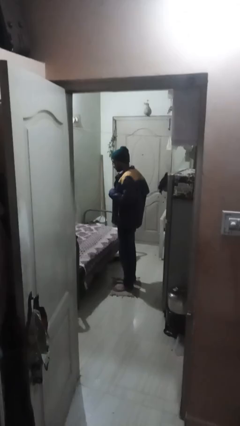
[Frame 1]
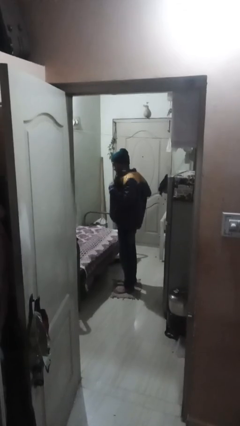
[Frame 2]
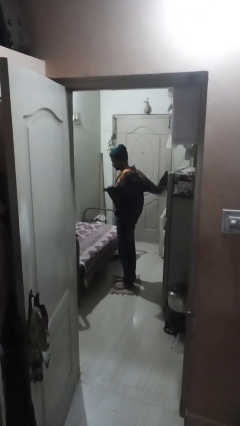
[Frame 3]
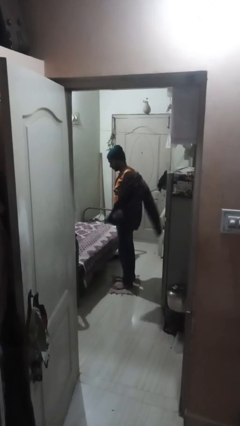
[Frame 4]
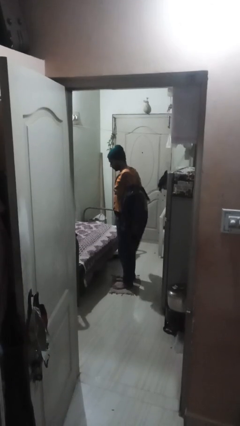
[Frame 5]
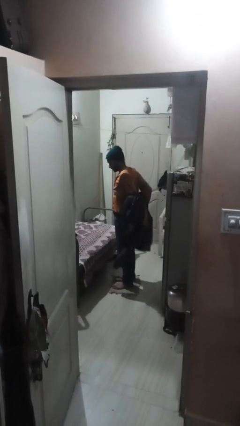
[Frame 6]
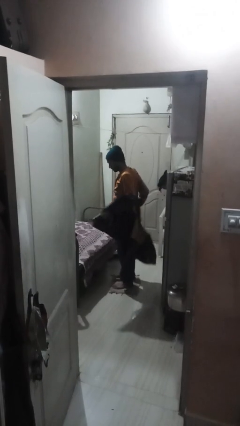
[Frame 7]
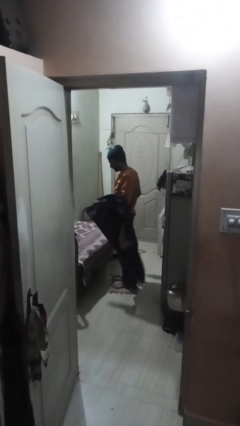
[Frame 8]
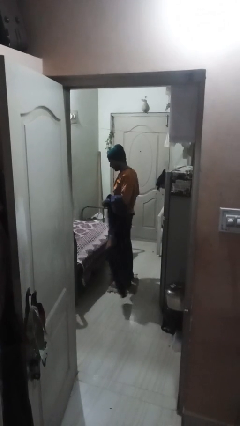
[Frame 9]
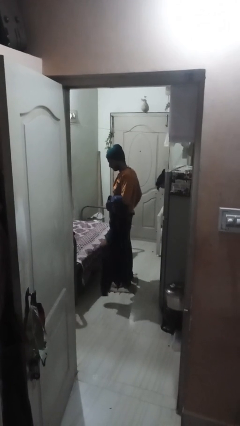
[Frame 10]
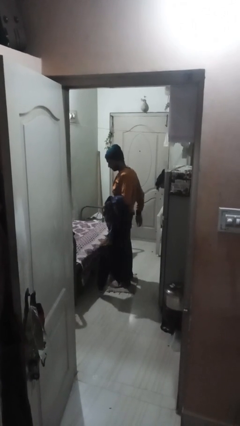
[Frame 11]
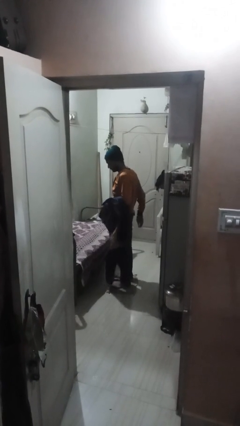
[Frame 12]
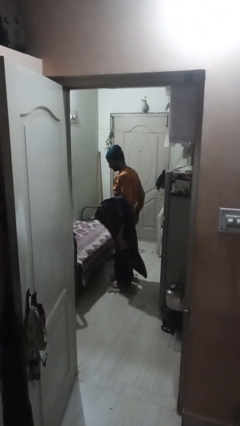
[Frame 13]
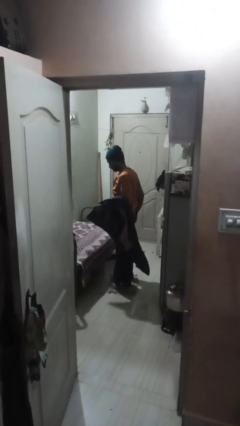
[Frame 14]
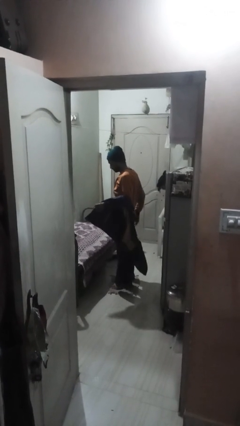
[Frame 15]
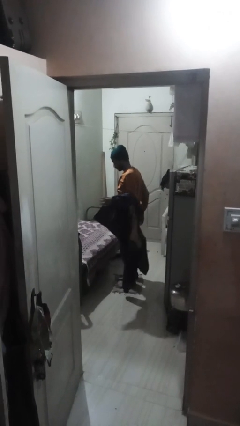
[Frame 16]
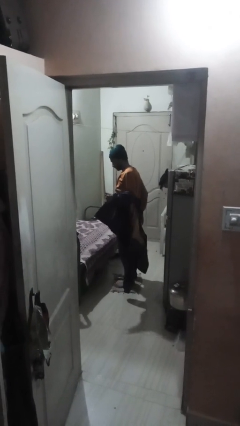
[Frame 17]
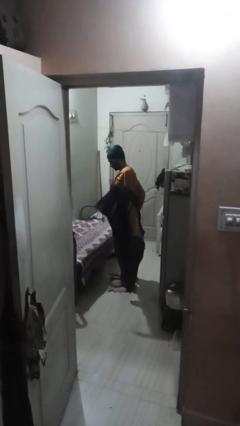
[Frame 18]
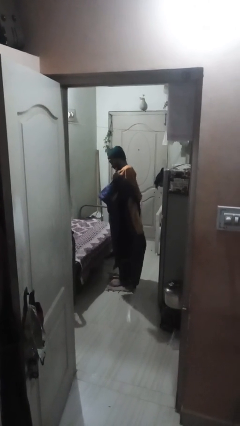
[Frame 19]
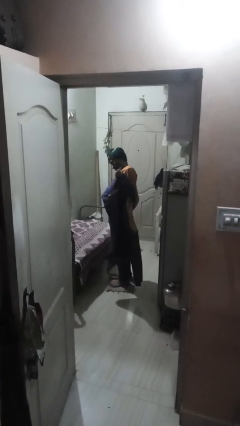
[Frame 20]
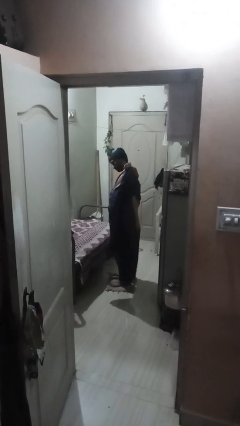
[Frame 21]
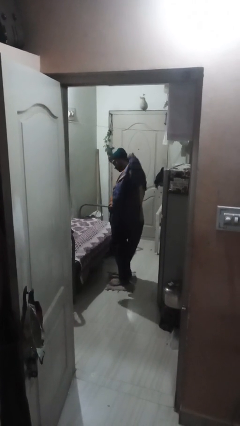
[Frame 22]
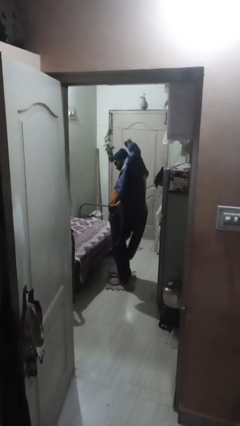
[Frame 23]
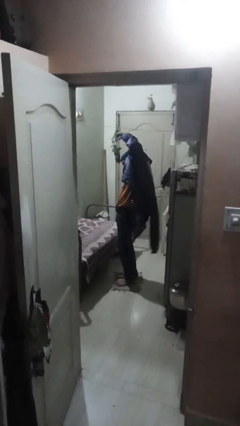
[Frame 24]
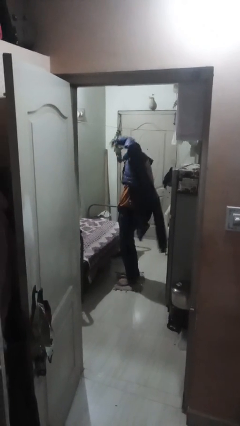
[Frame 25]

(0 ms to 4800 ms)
person takes off jacket

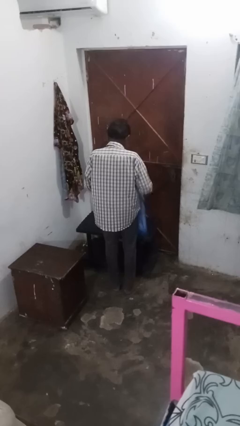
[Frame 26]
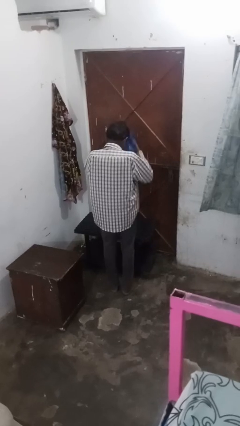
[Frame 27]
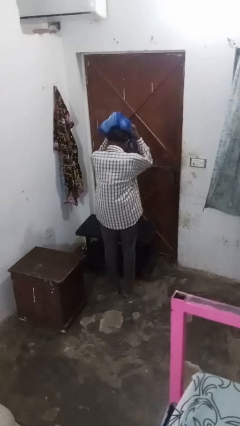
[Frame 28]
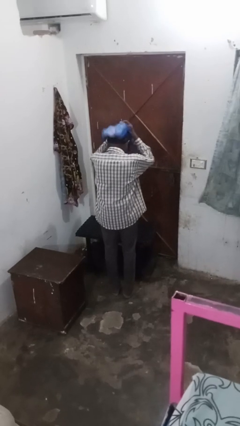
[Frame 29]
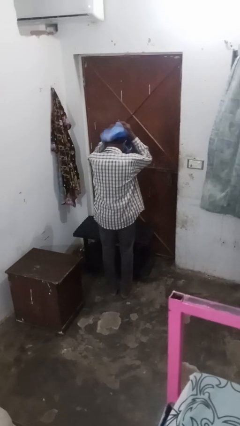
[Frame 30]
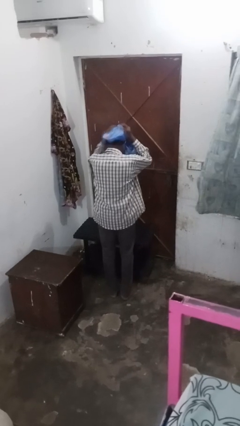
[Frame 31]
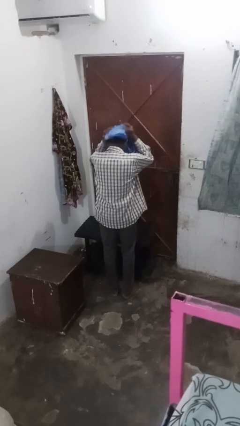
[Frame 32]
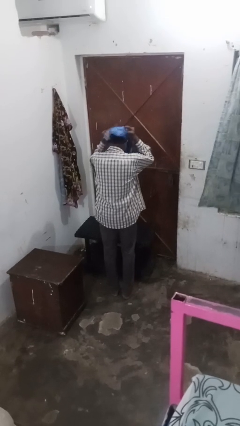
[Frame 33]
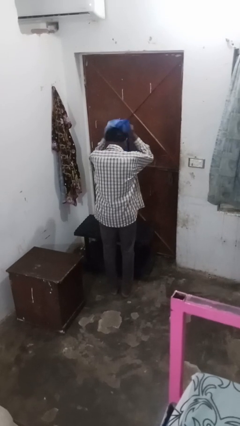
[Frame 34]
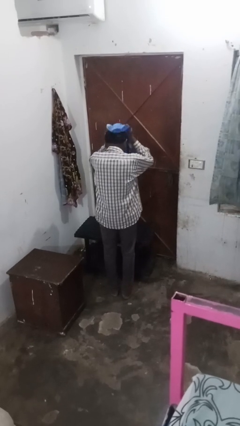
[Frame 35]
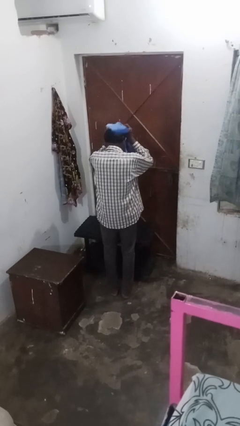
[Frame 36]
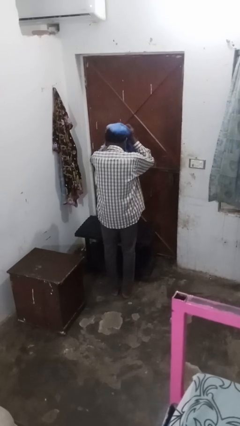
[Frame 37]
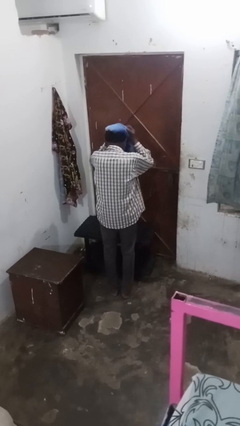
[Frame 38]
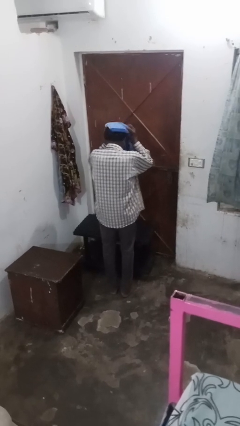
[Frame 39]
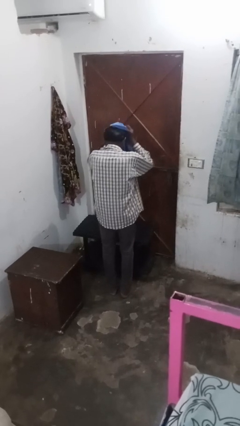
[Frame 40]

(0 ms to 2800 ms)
person dries hair with towel

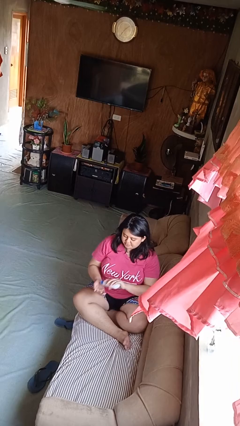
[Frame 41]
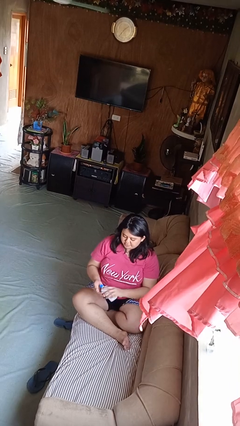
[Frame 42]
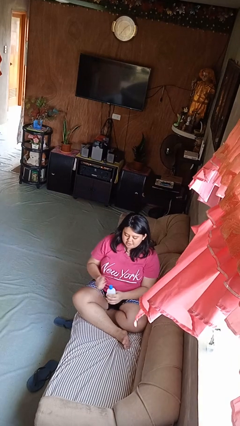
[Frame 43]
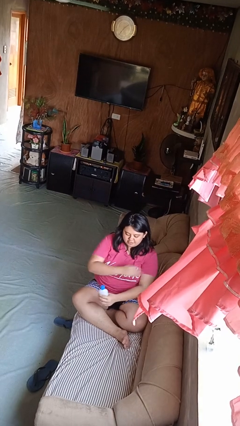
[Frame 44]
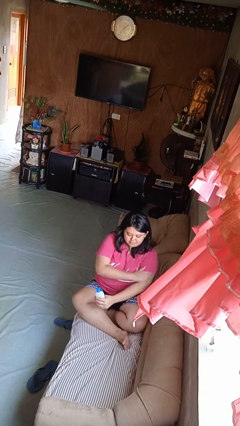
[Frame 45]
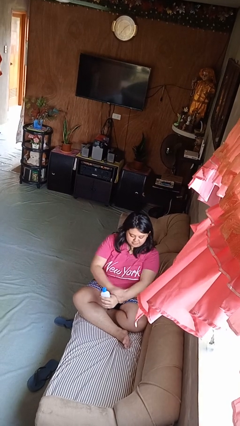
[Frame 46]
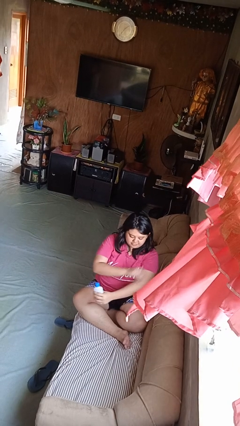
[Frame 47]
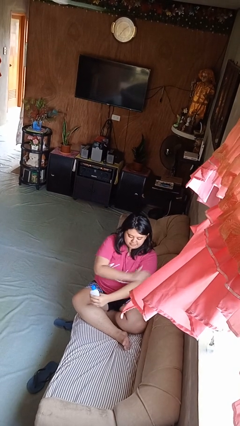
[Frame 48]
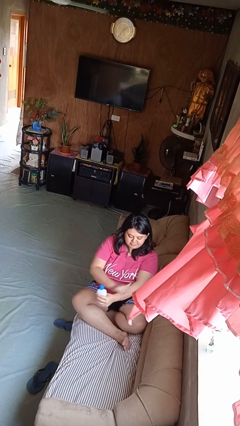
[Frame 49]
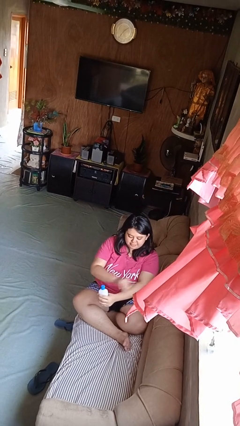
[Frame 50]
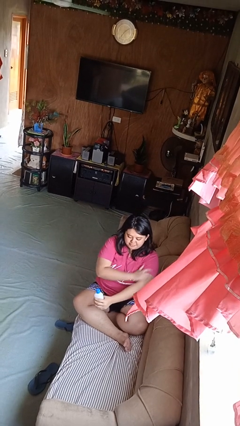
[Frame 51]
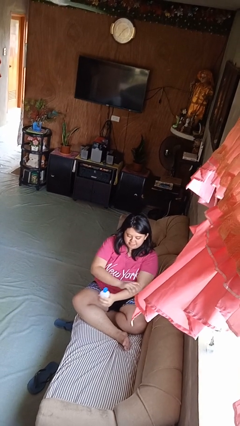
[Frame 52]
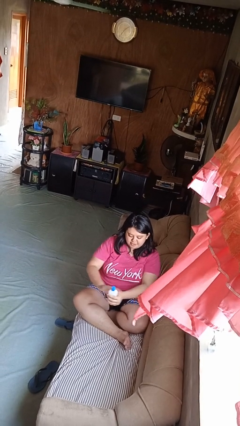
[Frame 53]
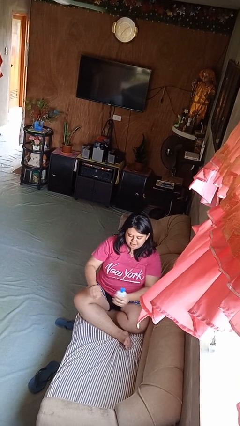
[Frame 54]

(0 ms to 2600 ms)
person applies sunscreen

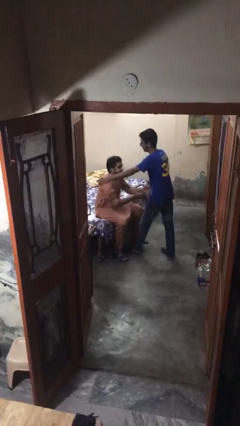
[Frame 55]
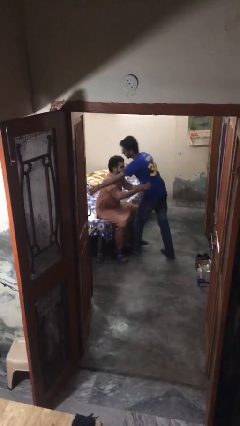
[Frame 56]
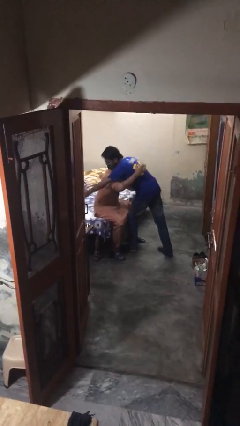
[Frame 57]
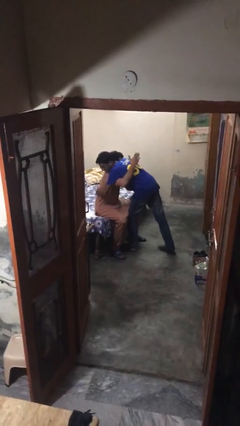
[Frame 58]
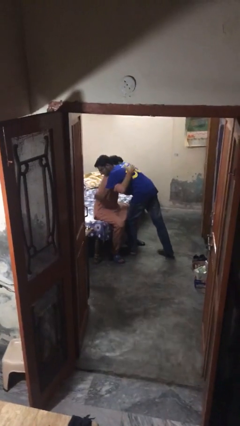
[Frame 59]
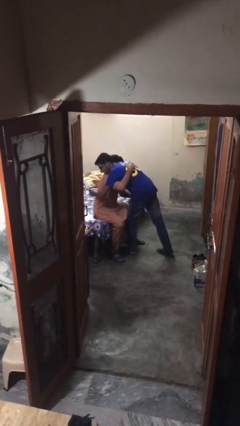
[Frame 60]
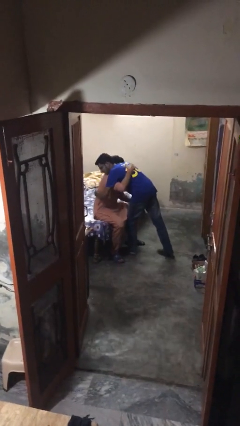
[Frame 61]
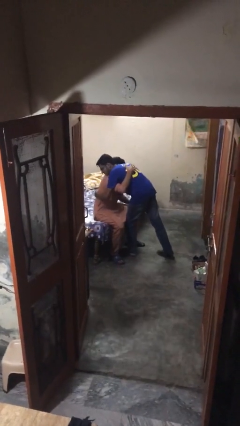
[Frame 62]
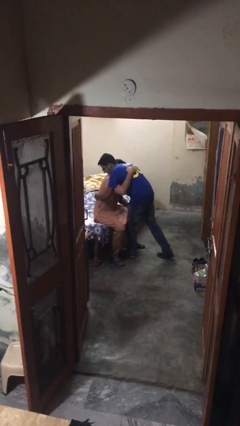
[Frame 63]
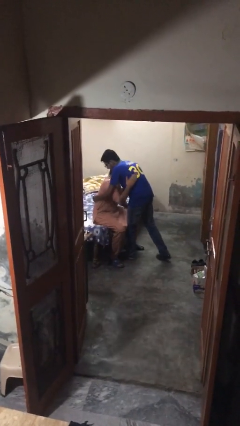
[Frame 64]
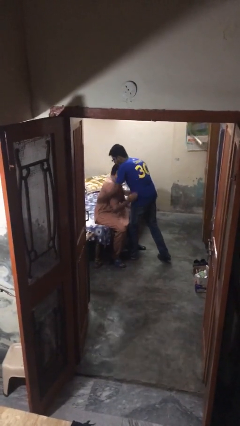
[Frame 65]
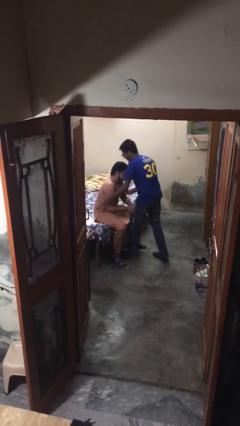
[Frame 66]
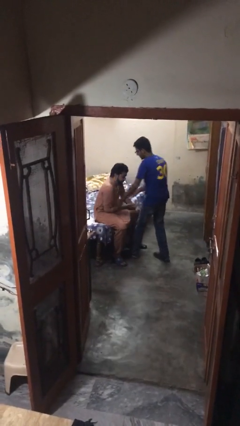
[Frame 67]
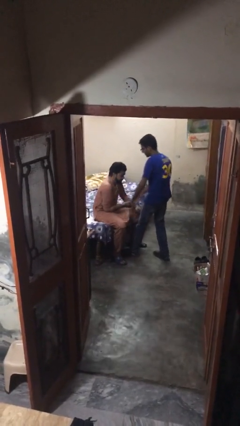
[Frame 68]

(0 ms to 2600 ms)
person embraces person

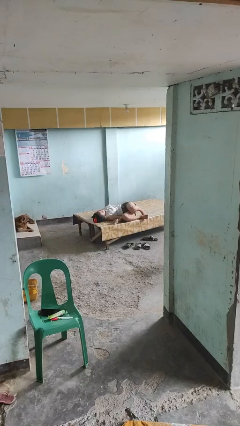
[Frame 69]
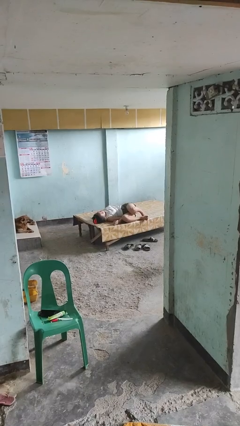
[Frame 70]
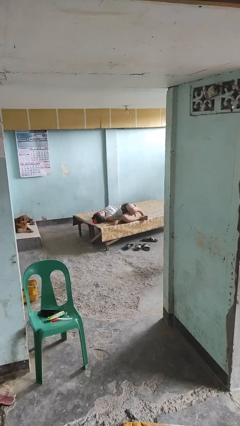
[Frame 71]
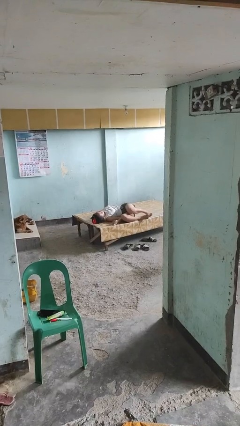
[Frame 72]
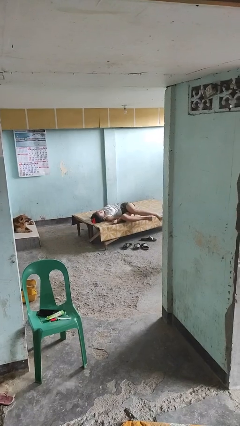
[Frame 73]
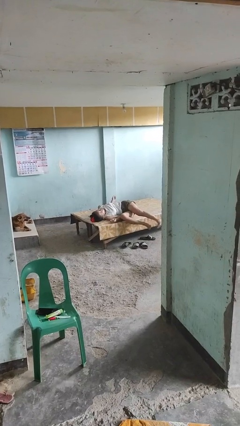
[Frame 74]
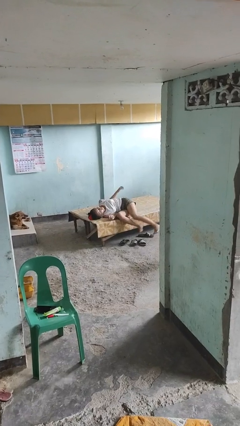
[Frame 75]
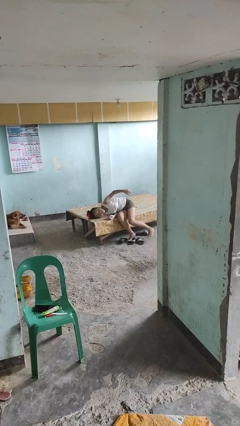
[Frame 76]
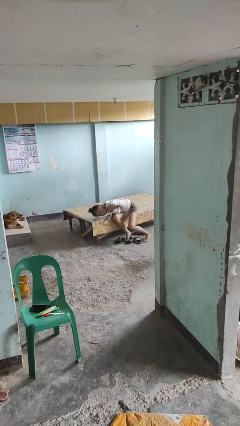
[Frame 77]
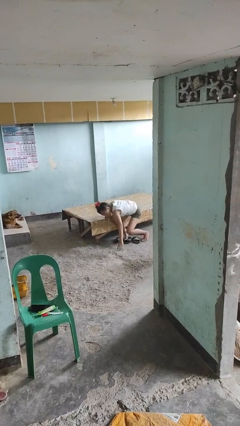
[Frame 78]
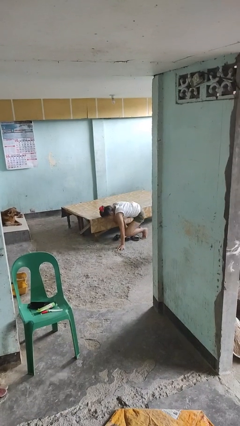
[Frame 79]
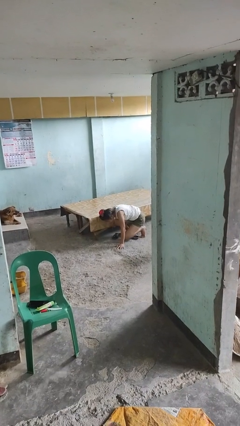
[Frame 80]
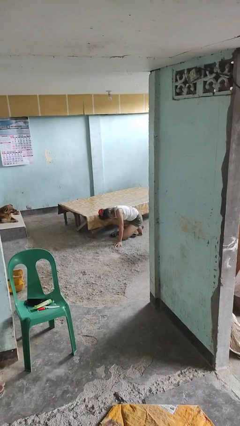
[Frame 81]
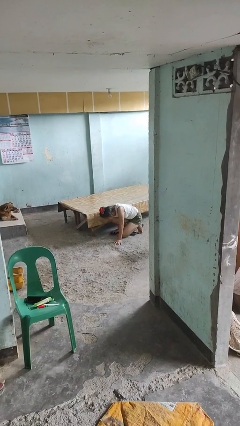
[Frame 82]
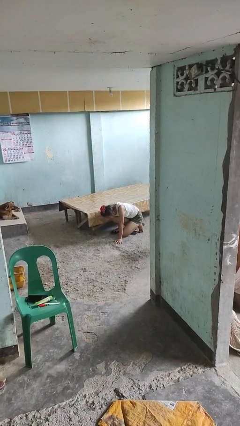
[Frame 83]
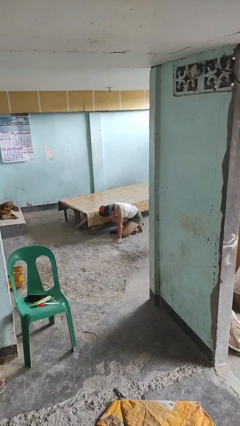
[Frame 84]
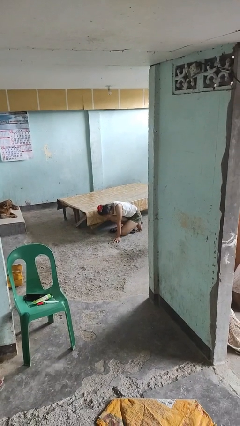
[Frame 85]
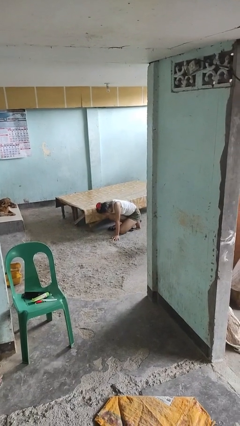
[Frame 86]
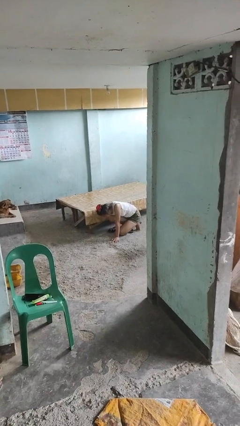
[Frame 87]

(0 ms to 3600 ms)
person falls from bed

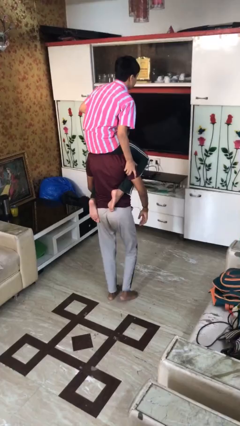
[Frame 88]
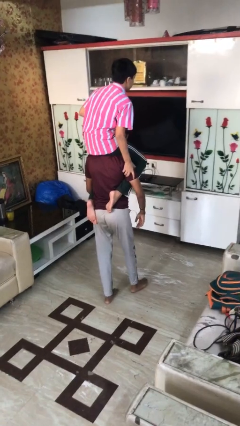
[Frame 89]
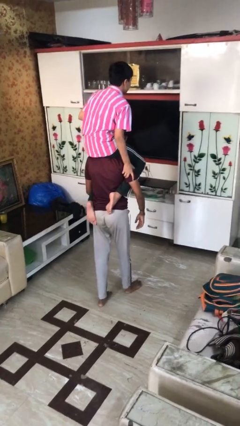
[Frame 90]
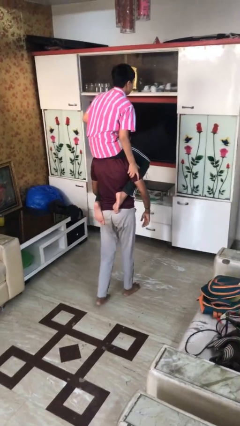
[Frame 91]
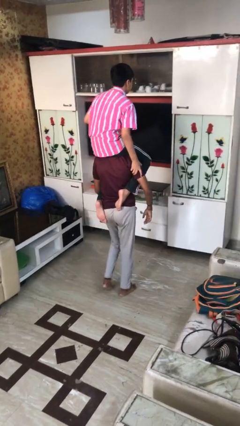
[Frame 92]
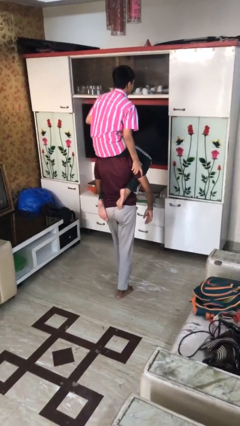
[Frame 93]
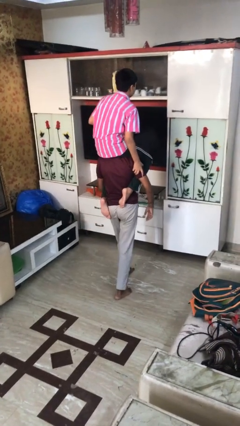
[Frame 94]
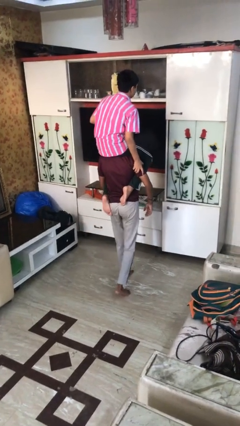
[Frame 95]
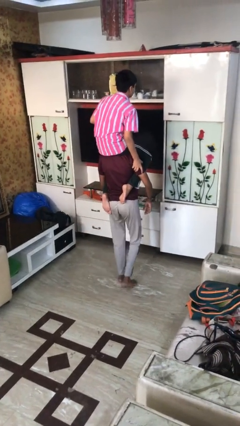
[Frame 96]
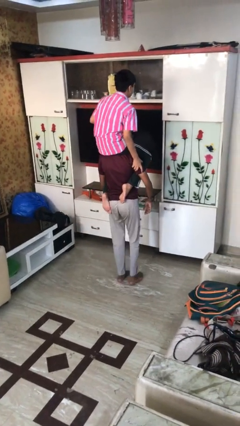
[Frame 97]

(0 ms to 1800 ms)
person carries person on shoulders
